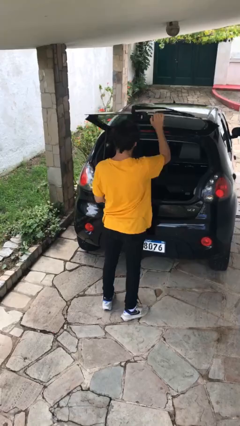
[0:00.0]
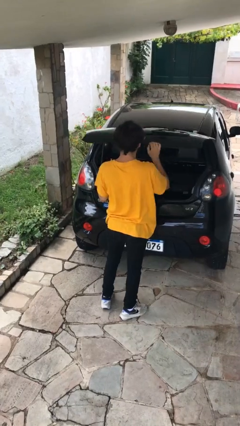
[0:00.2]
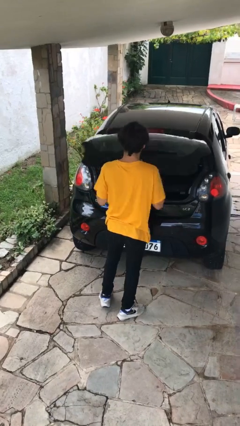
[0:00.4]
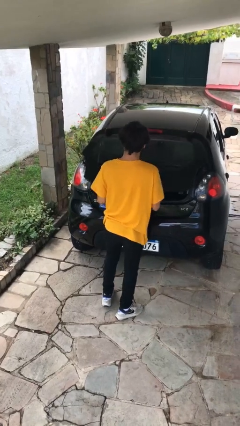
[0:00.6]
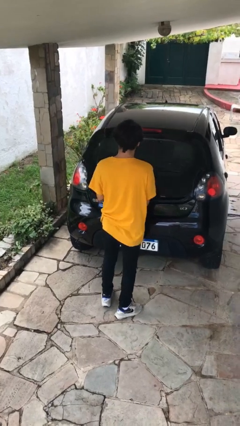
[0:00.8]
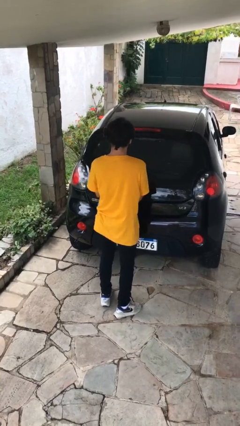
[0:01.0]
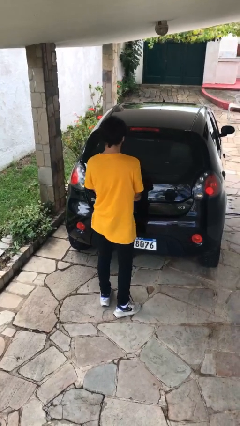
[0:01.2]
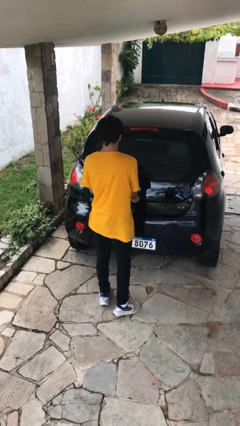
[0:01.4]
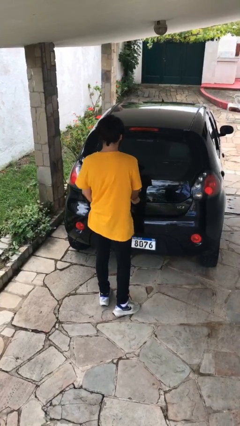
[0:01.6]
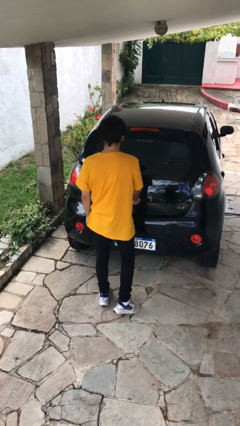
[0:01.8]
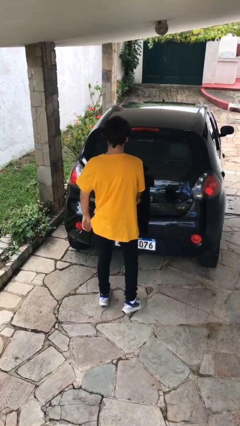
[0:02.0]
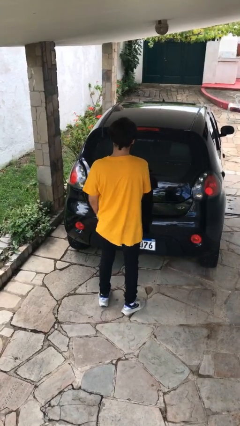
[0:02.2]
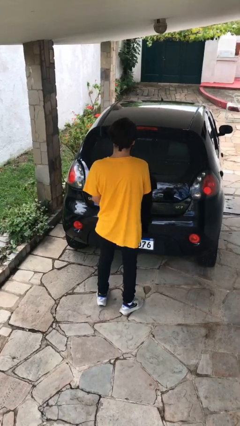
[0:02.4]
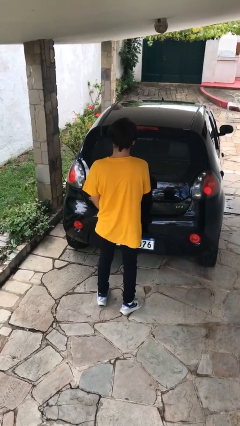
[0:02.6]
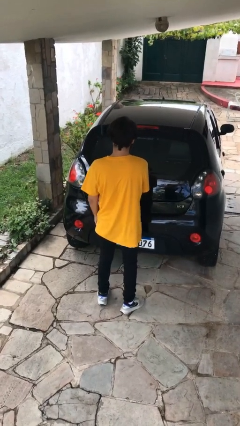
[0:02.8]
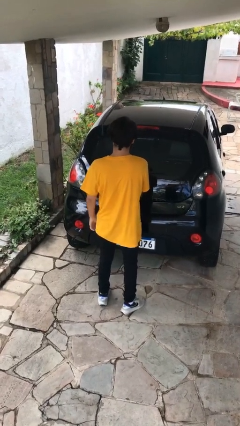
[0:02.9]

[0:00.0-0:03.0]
person closes car trunk

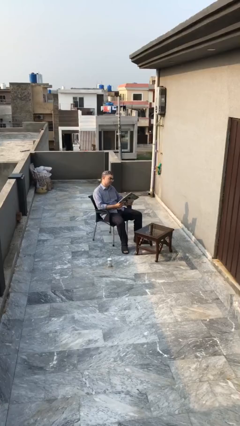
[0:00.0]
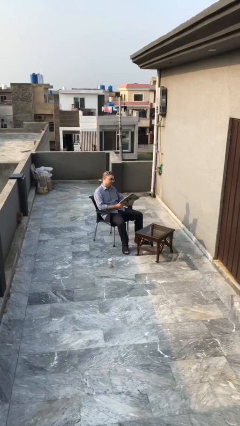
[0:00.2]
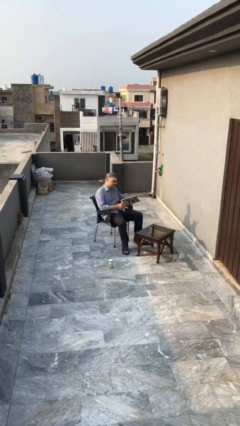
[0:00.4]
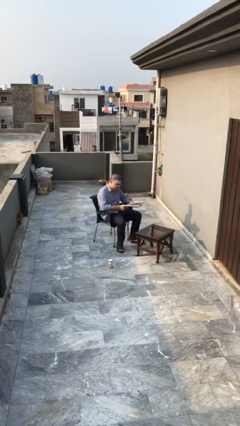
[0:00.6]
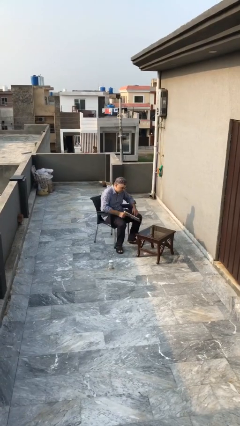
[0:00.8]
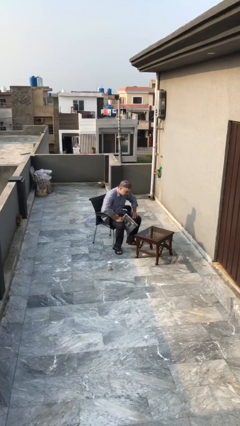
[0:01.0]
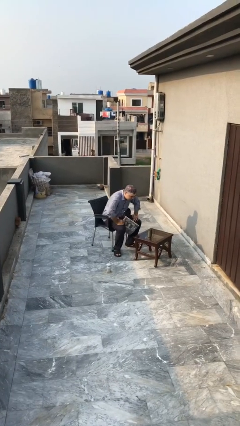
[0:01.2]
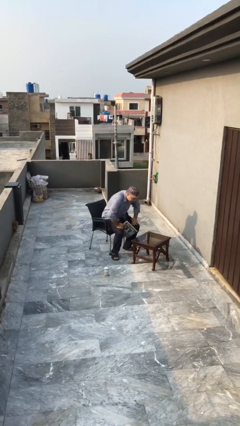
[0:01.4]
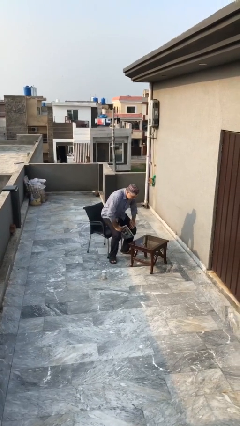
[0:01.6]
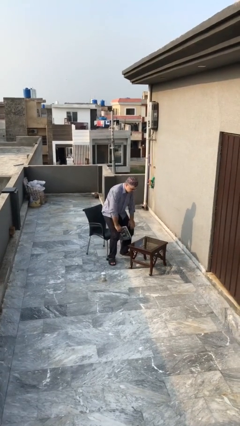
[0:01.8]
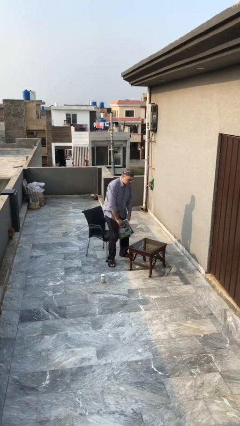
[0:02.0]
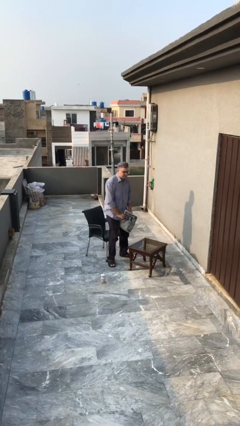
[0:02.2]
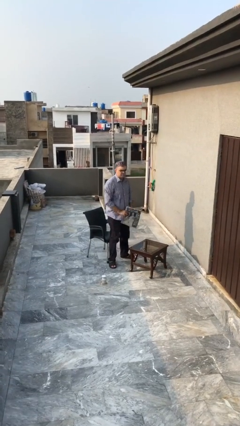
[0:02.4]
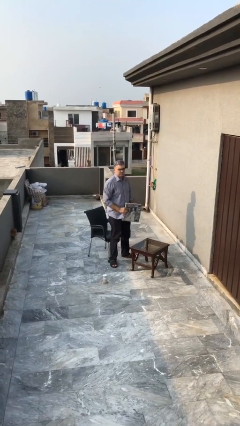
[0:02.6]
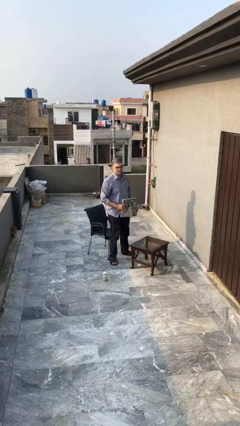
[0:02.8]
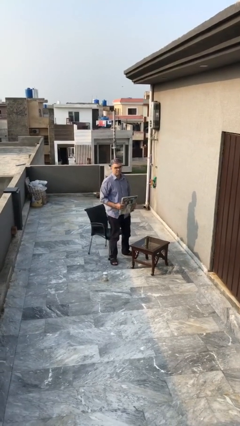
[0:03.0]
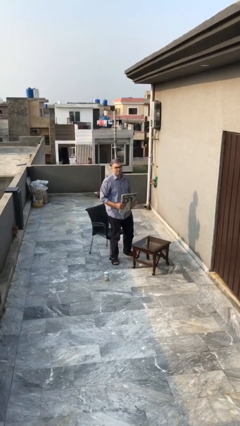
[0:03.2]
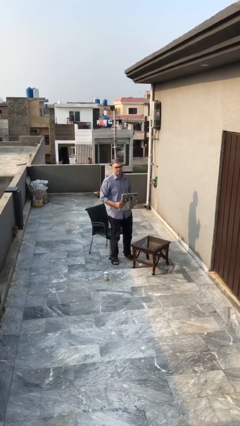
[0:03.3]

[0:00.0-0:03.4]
person stands up

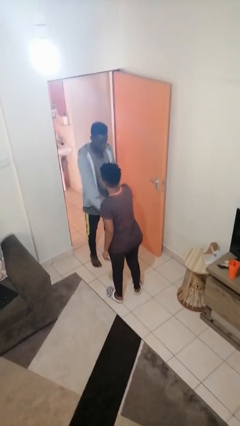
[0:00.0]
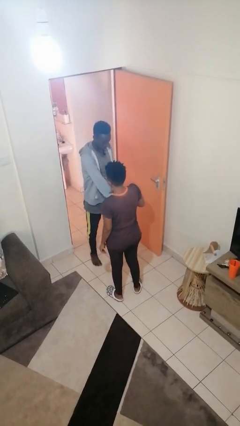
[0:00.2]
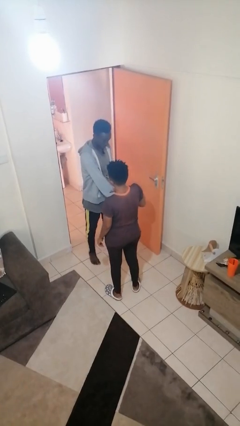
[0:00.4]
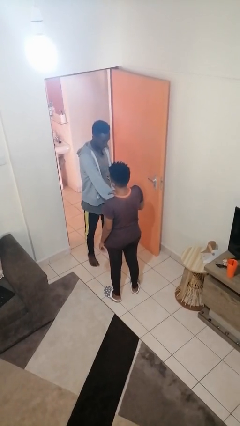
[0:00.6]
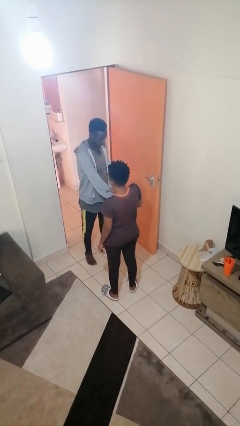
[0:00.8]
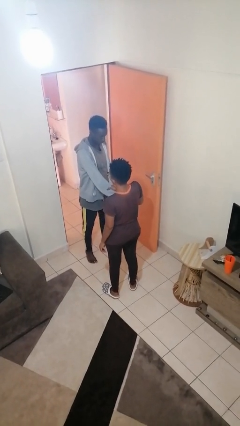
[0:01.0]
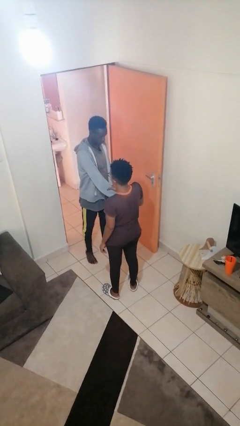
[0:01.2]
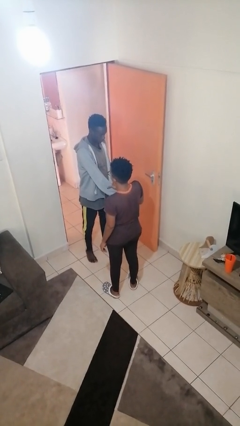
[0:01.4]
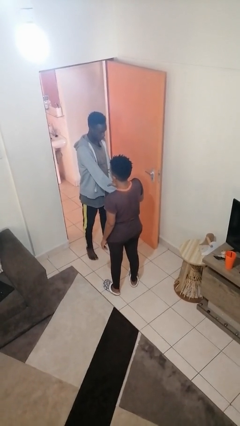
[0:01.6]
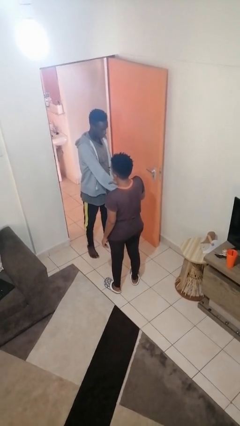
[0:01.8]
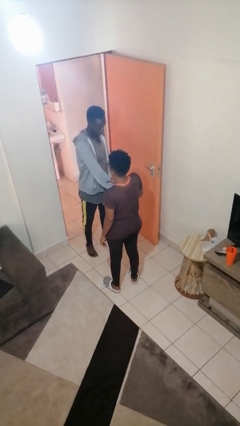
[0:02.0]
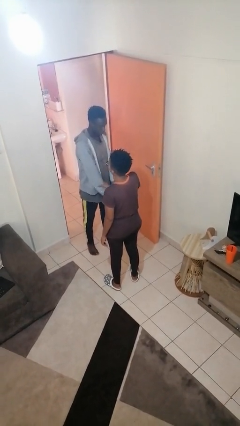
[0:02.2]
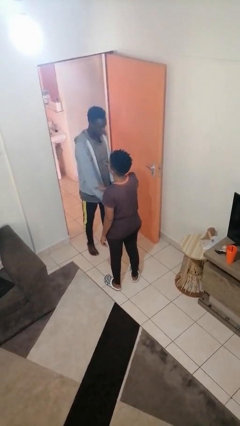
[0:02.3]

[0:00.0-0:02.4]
person grabs person by forearm

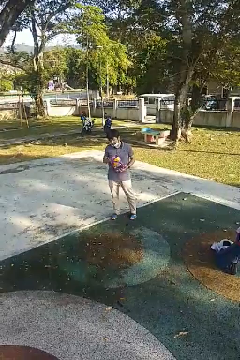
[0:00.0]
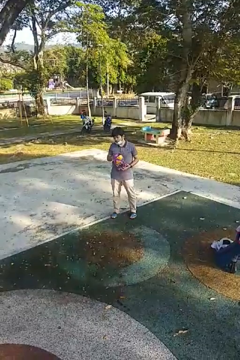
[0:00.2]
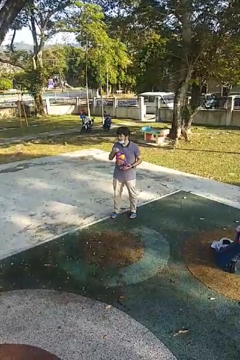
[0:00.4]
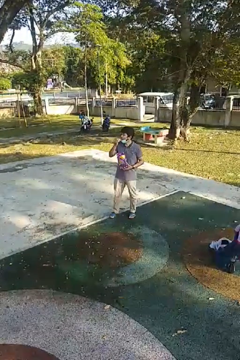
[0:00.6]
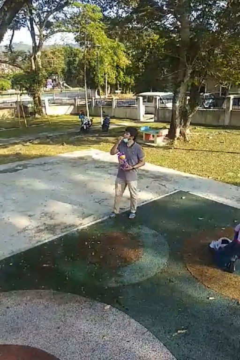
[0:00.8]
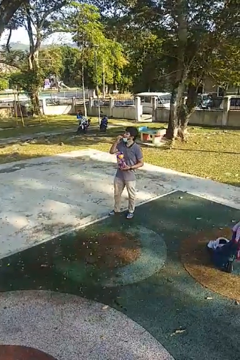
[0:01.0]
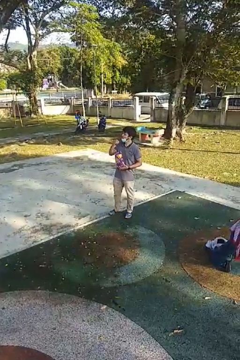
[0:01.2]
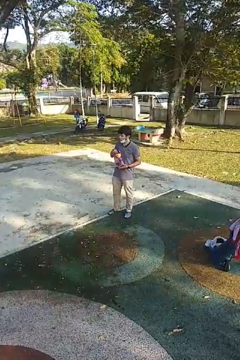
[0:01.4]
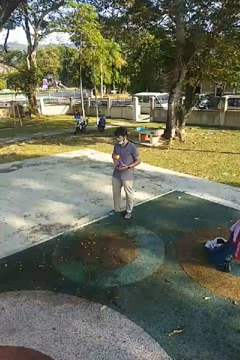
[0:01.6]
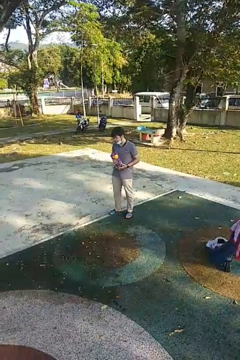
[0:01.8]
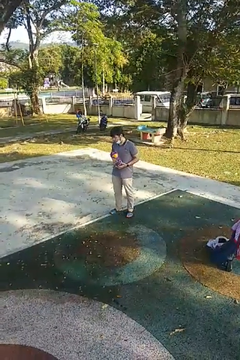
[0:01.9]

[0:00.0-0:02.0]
person eats snack from bag

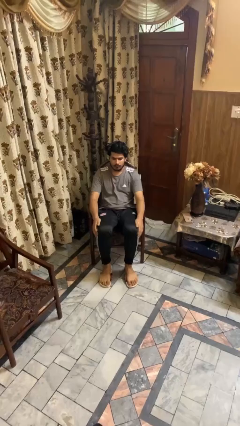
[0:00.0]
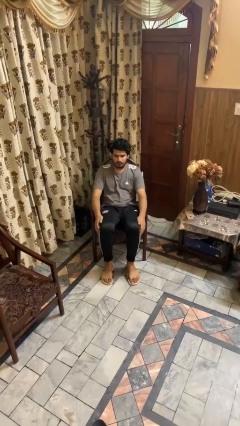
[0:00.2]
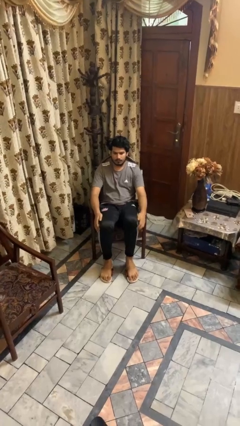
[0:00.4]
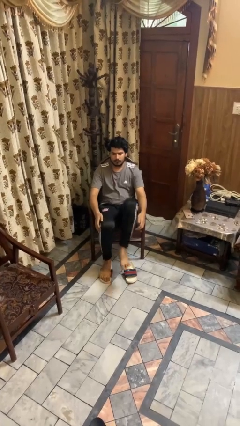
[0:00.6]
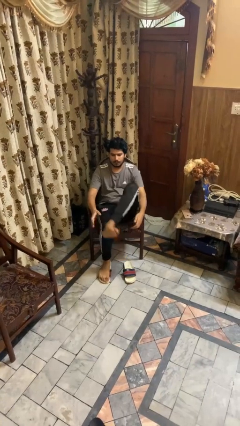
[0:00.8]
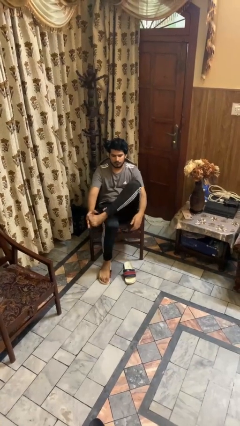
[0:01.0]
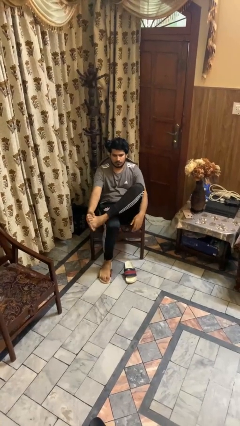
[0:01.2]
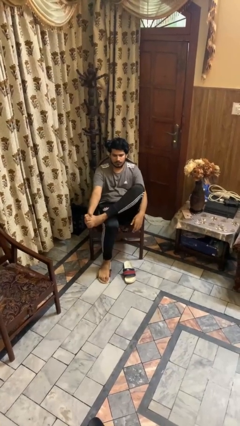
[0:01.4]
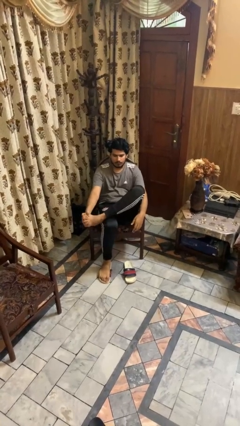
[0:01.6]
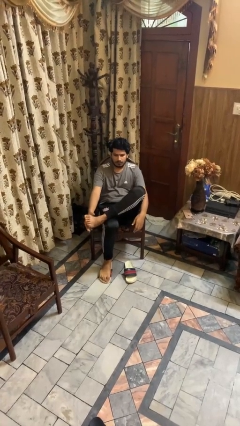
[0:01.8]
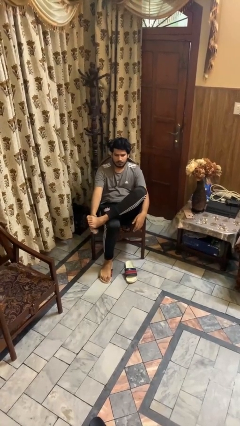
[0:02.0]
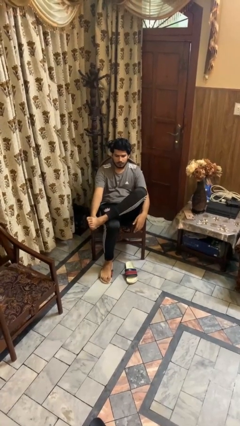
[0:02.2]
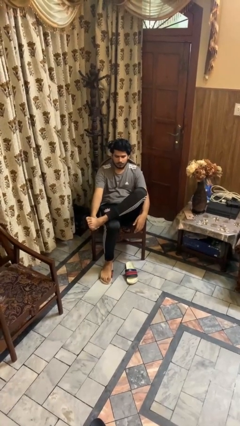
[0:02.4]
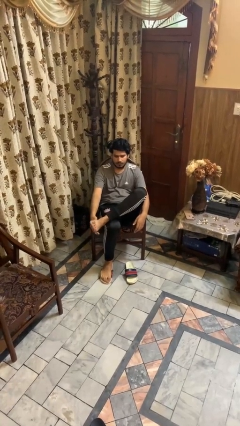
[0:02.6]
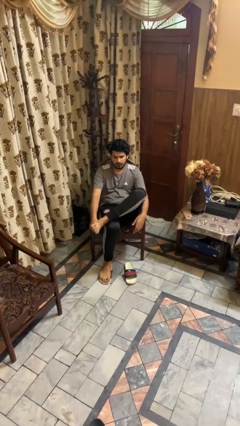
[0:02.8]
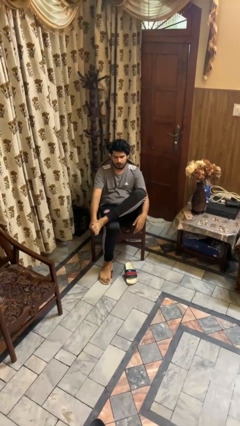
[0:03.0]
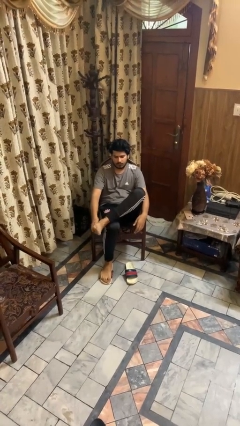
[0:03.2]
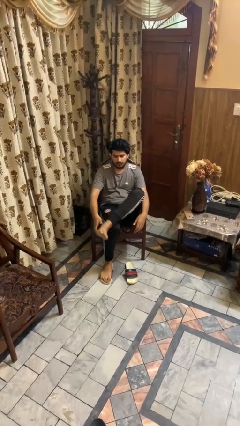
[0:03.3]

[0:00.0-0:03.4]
person rubs foot

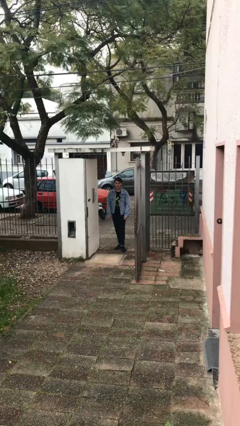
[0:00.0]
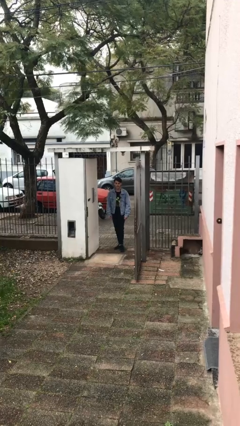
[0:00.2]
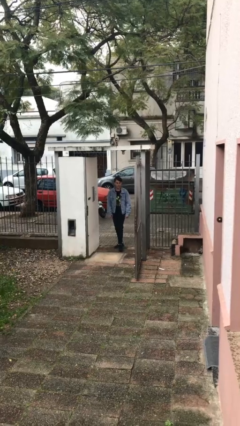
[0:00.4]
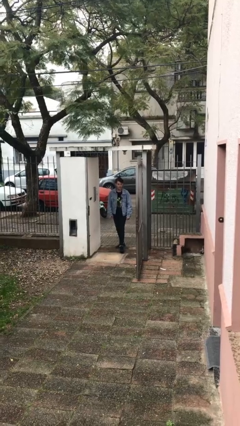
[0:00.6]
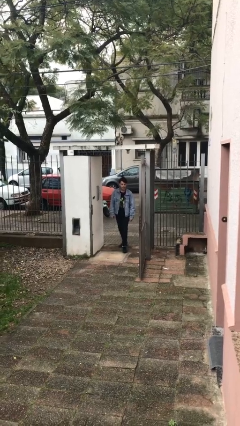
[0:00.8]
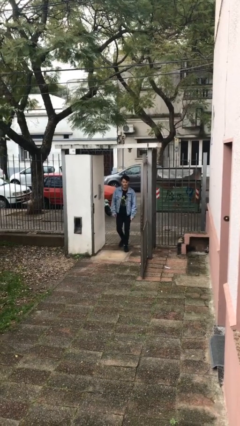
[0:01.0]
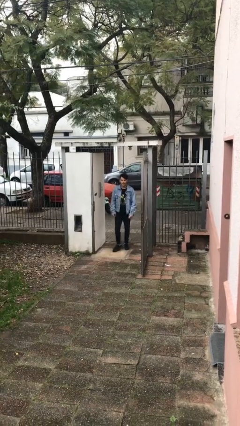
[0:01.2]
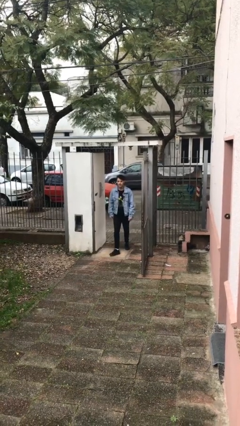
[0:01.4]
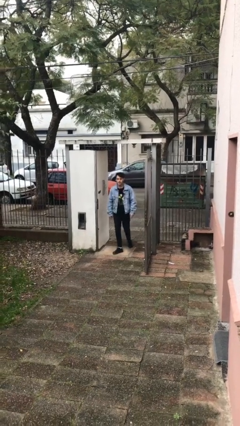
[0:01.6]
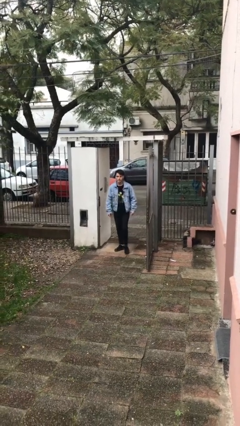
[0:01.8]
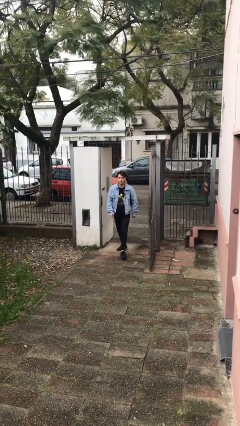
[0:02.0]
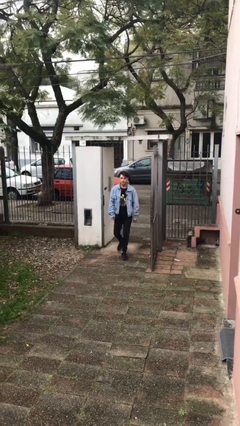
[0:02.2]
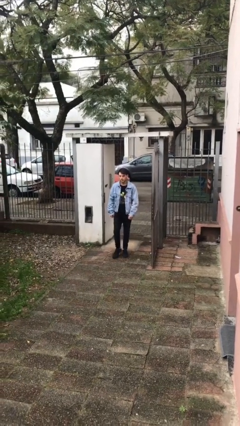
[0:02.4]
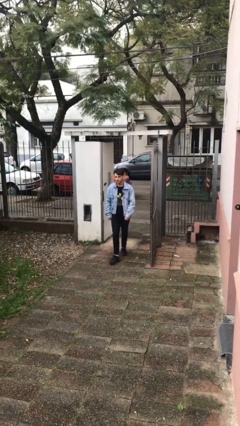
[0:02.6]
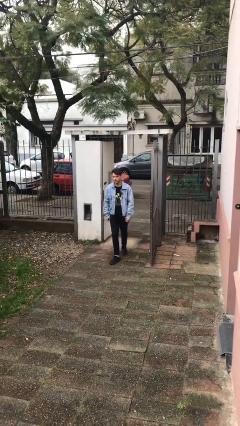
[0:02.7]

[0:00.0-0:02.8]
person enters scene through structure

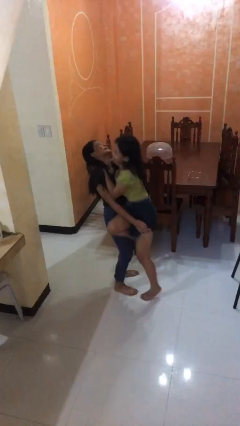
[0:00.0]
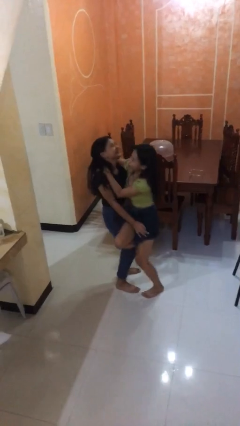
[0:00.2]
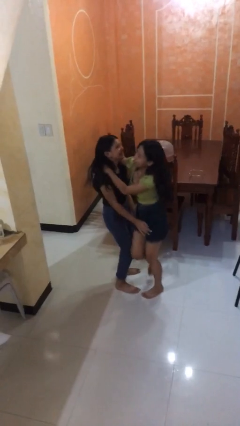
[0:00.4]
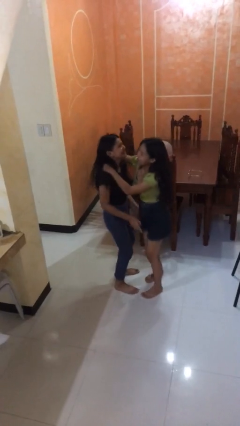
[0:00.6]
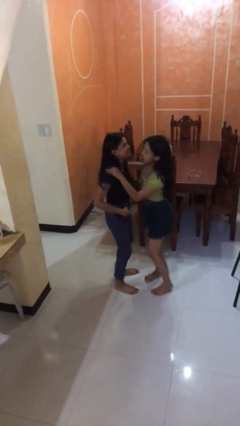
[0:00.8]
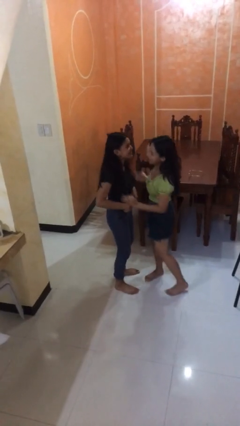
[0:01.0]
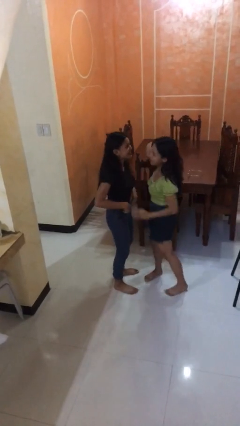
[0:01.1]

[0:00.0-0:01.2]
person puts down person
